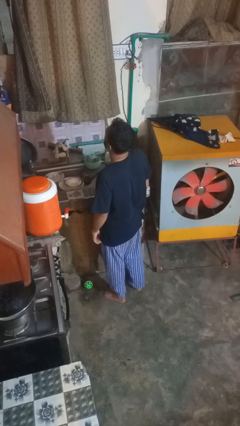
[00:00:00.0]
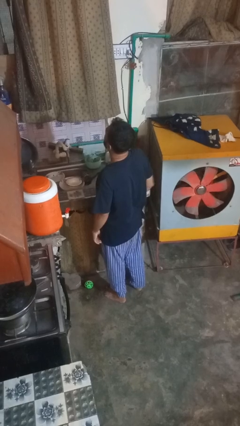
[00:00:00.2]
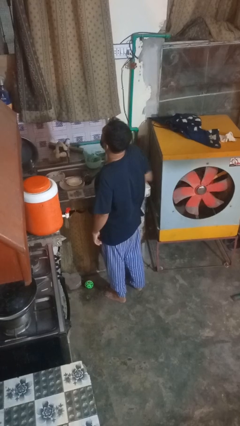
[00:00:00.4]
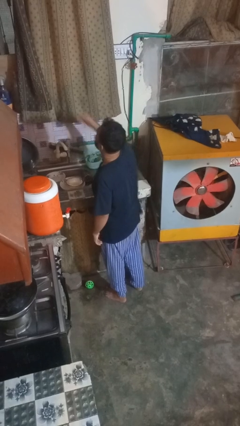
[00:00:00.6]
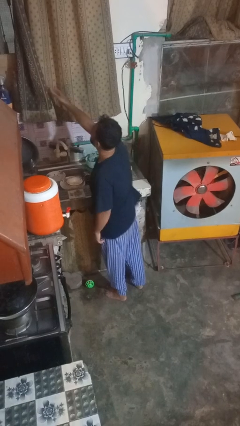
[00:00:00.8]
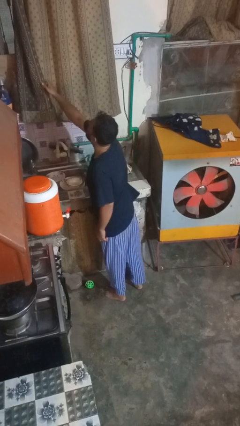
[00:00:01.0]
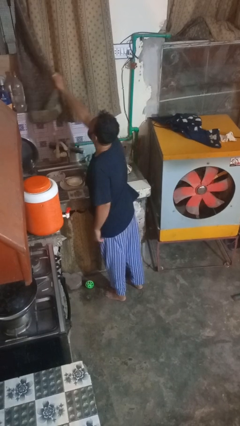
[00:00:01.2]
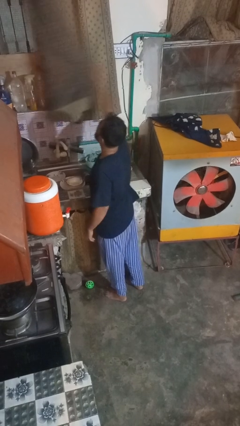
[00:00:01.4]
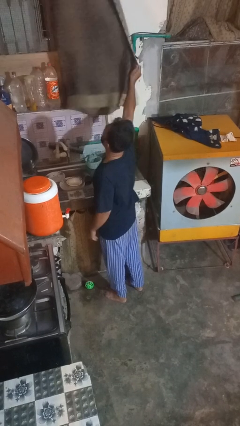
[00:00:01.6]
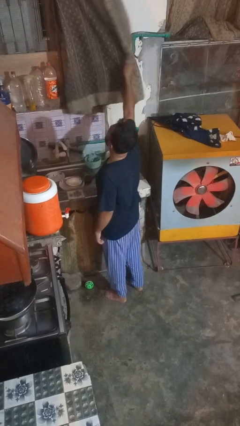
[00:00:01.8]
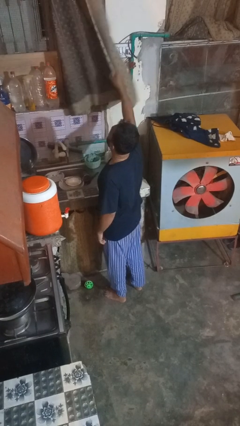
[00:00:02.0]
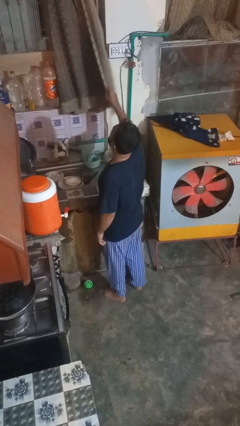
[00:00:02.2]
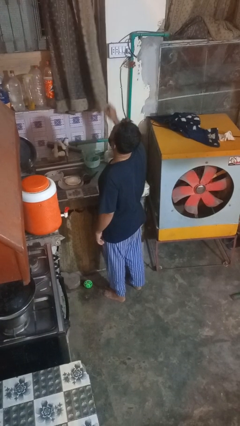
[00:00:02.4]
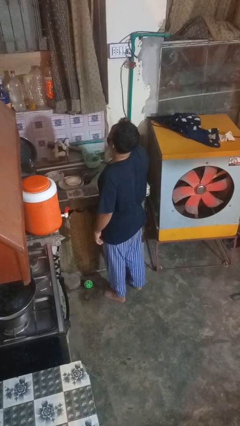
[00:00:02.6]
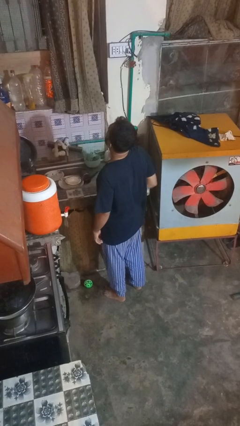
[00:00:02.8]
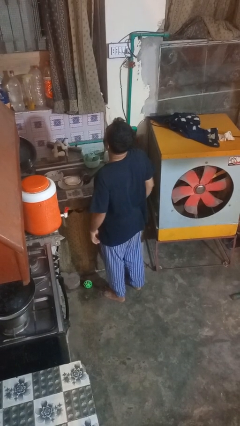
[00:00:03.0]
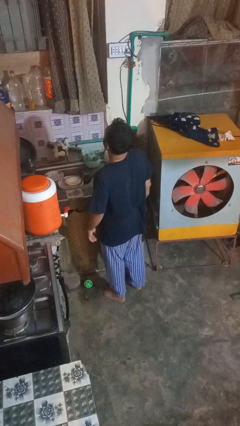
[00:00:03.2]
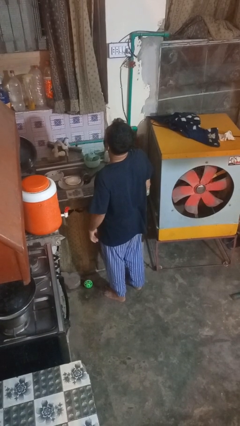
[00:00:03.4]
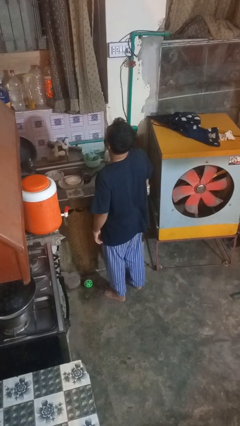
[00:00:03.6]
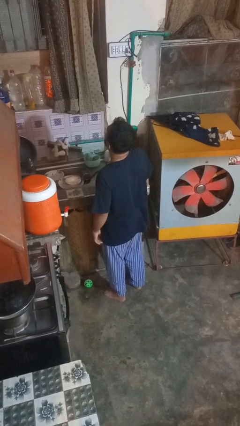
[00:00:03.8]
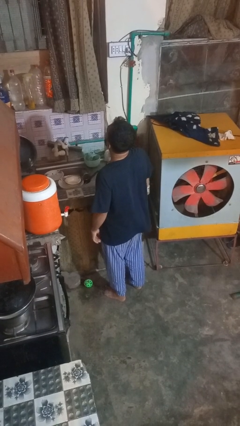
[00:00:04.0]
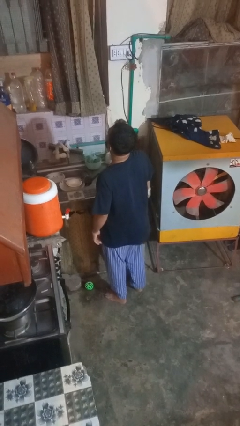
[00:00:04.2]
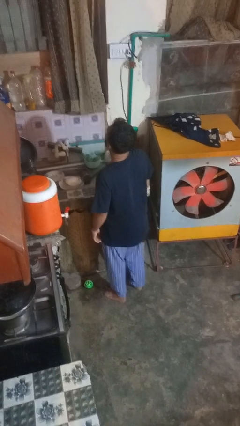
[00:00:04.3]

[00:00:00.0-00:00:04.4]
person opens curtains

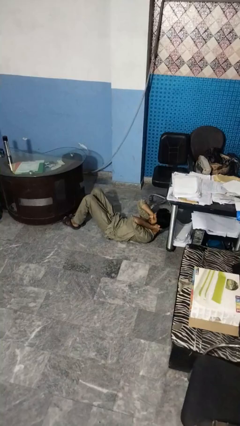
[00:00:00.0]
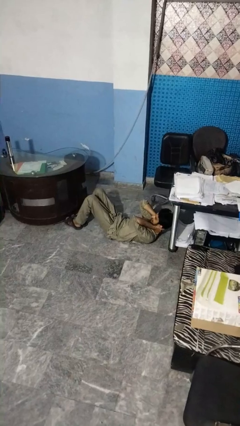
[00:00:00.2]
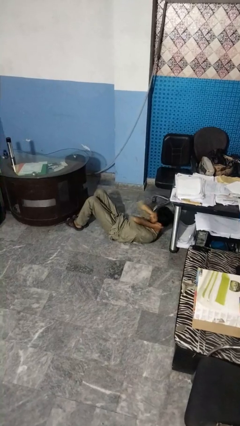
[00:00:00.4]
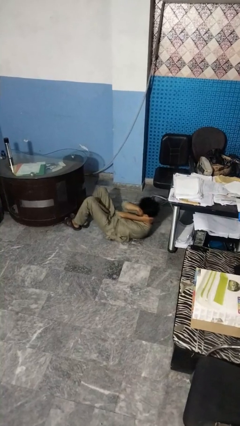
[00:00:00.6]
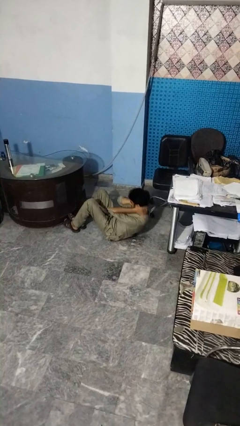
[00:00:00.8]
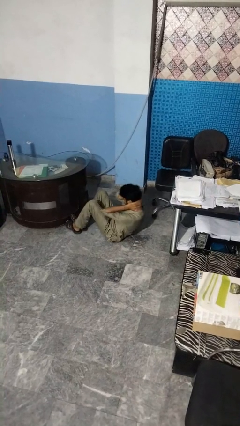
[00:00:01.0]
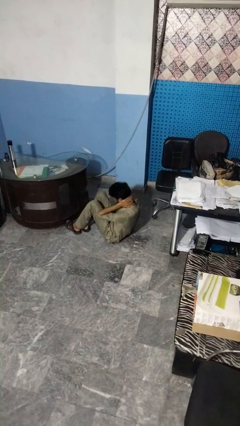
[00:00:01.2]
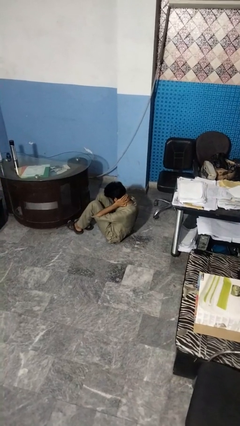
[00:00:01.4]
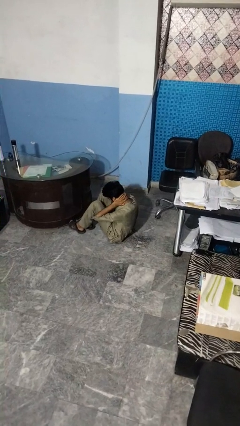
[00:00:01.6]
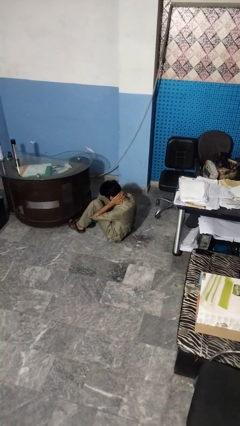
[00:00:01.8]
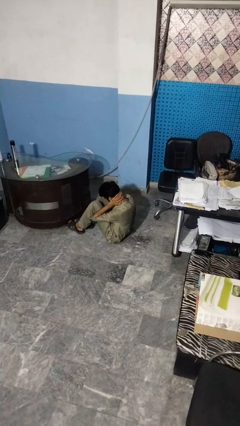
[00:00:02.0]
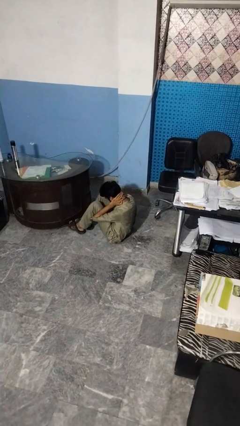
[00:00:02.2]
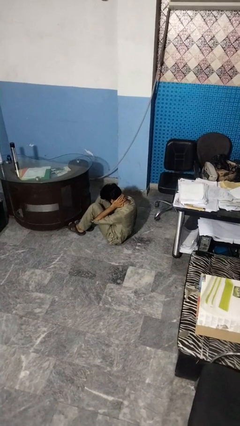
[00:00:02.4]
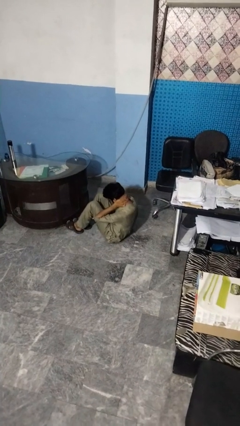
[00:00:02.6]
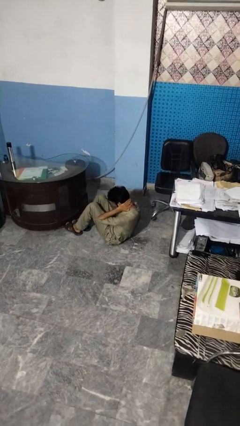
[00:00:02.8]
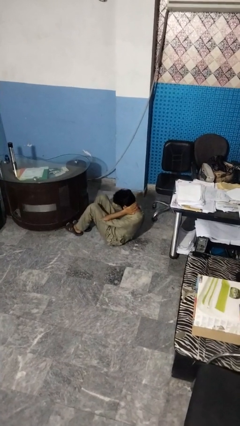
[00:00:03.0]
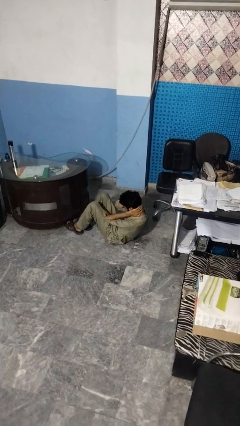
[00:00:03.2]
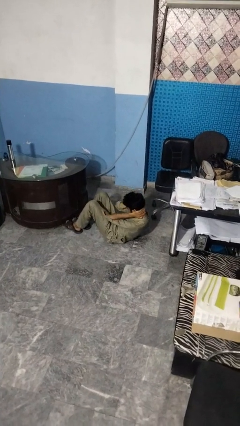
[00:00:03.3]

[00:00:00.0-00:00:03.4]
person exercises with situp

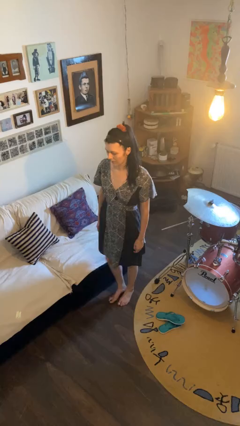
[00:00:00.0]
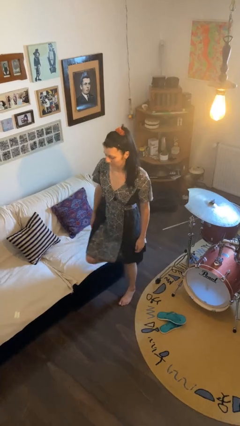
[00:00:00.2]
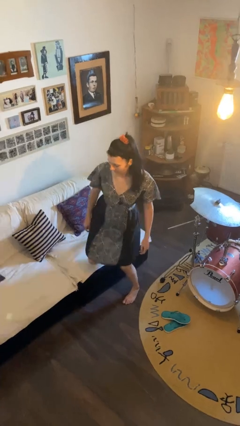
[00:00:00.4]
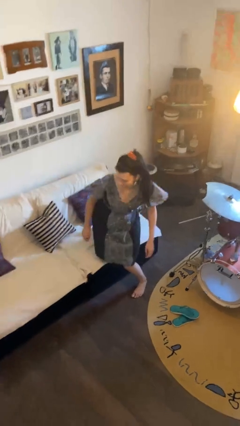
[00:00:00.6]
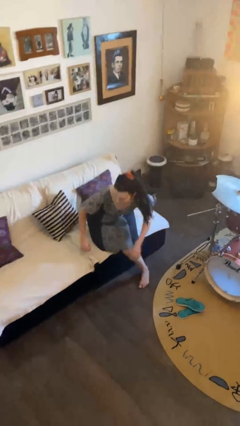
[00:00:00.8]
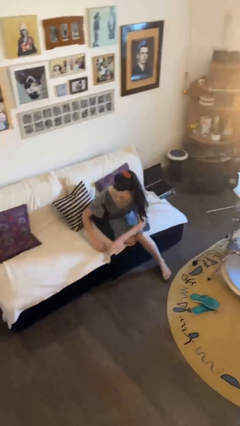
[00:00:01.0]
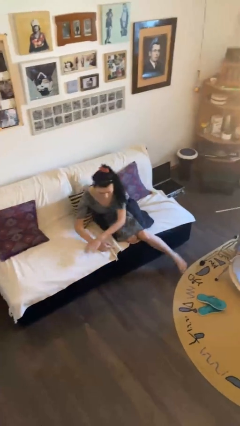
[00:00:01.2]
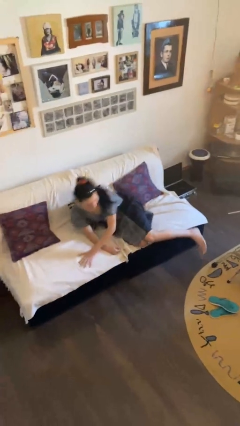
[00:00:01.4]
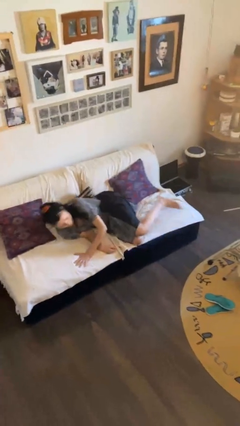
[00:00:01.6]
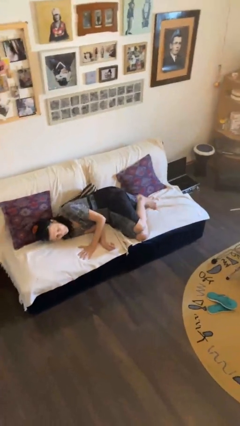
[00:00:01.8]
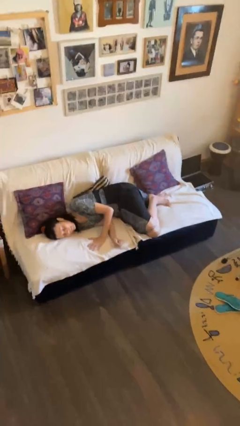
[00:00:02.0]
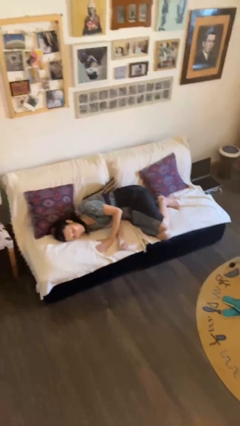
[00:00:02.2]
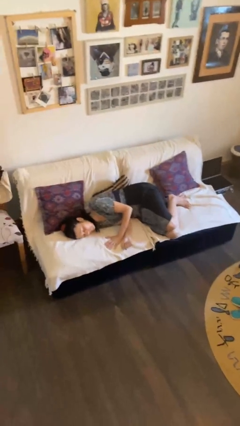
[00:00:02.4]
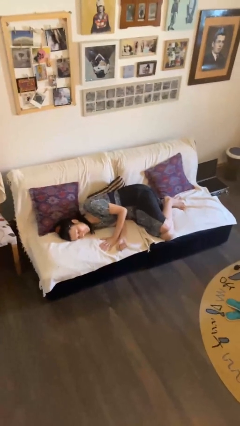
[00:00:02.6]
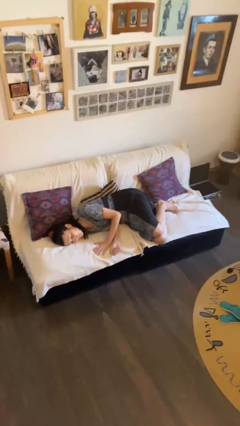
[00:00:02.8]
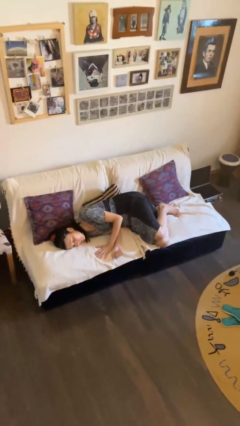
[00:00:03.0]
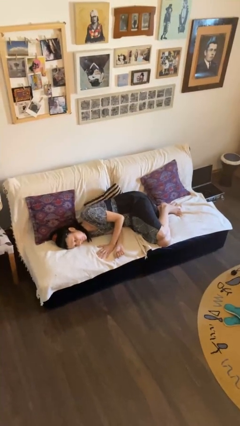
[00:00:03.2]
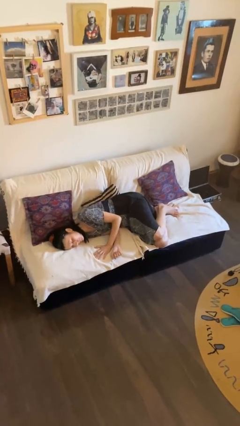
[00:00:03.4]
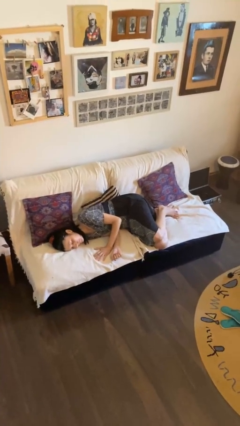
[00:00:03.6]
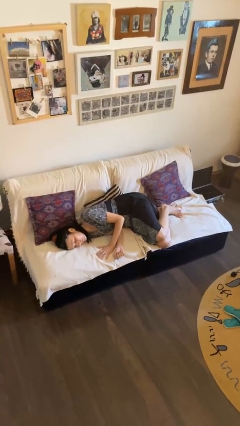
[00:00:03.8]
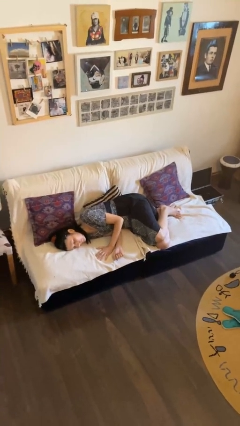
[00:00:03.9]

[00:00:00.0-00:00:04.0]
person lies down on couch

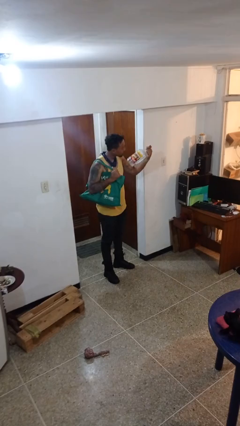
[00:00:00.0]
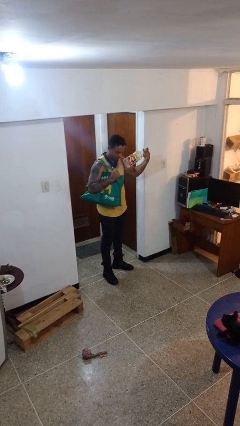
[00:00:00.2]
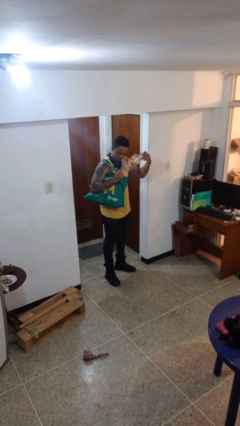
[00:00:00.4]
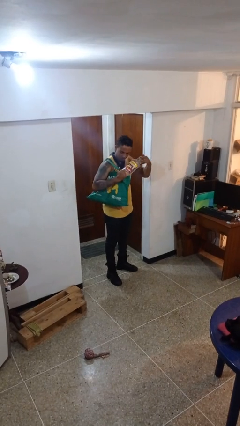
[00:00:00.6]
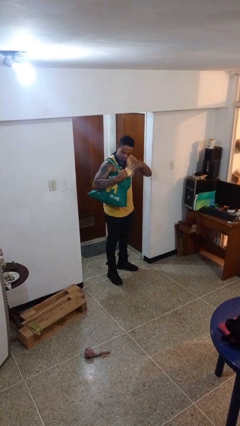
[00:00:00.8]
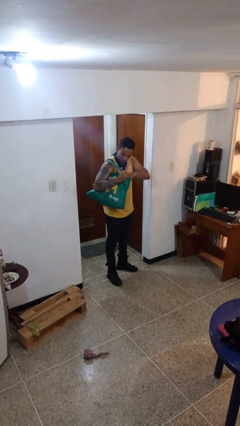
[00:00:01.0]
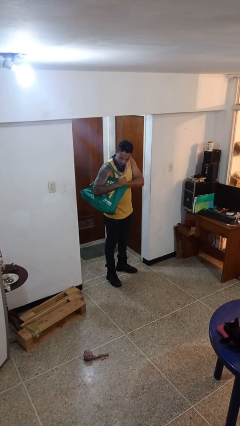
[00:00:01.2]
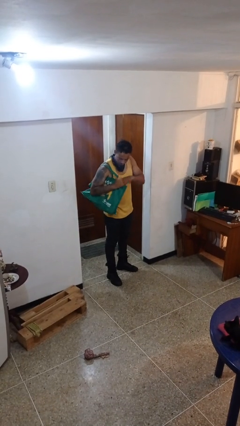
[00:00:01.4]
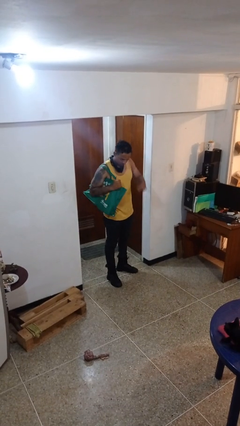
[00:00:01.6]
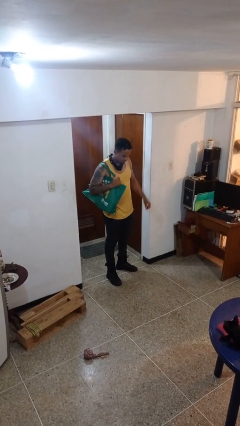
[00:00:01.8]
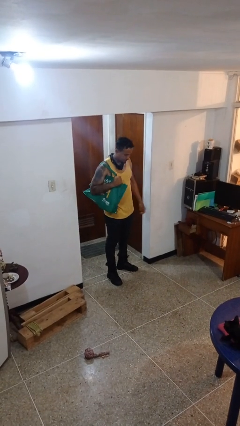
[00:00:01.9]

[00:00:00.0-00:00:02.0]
person puts object into purse

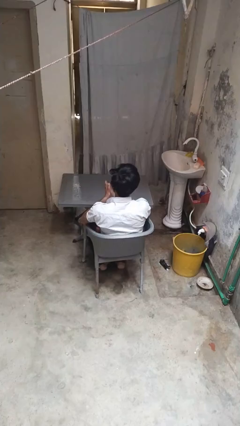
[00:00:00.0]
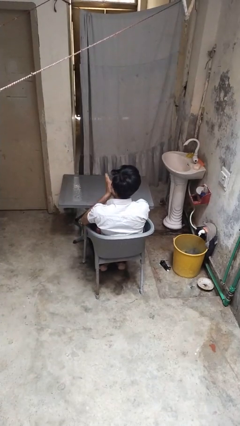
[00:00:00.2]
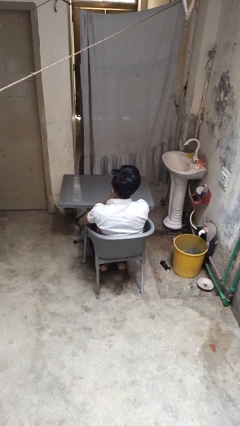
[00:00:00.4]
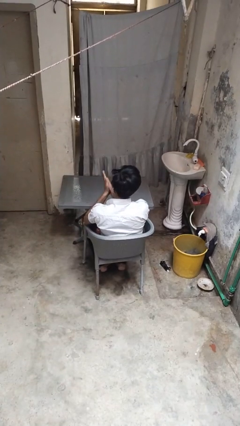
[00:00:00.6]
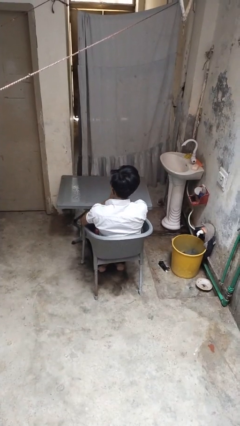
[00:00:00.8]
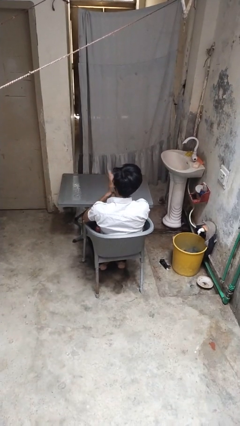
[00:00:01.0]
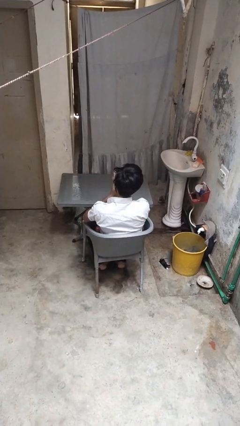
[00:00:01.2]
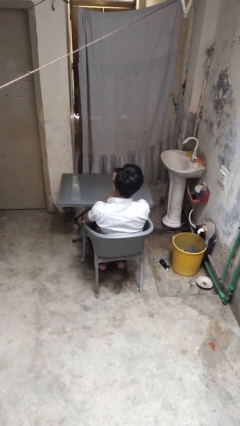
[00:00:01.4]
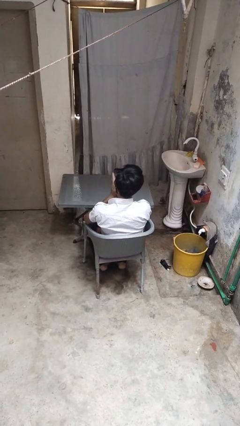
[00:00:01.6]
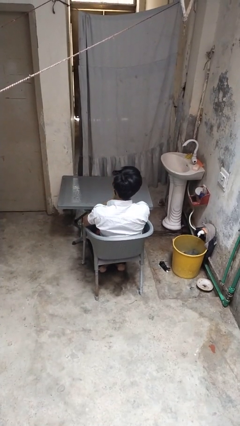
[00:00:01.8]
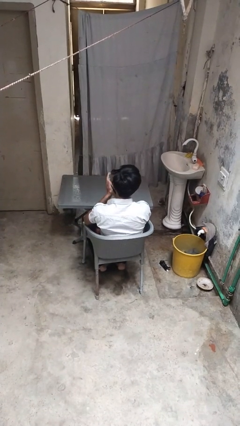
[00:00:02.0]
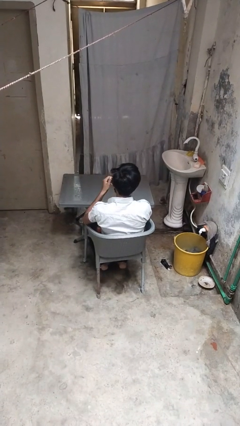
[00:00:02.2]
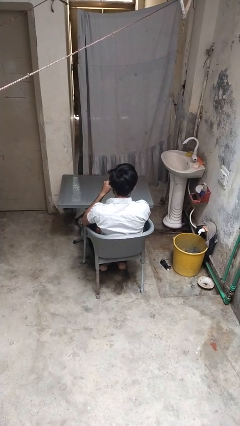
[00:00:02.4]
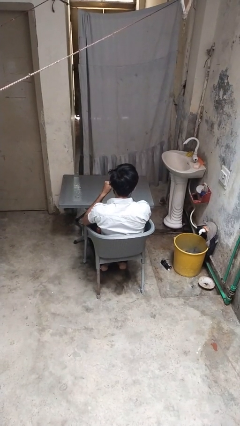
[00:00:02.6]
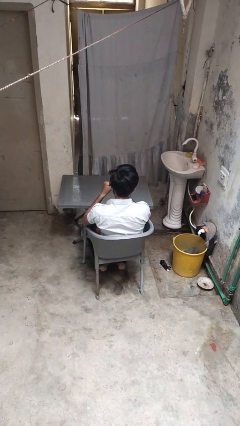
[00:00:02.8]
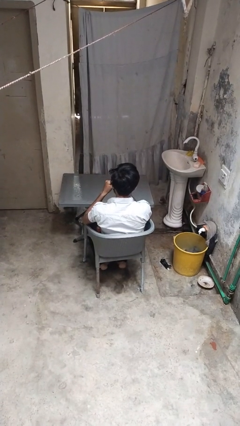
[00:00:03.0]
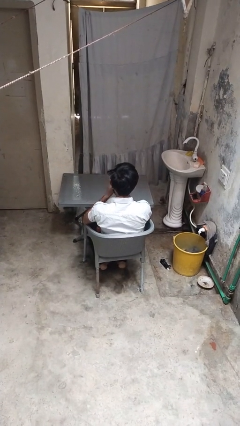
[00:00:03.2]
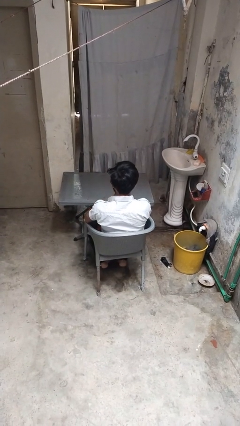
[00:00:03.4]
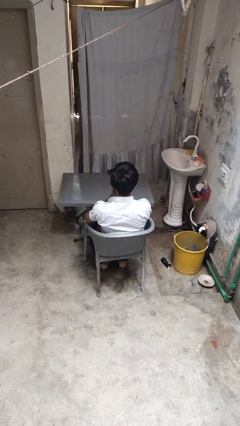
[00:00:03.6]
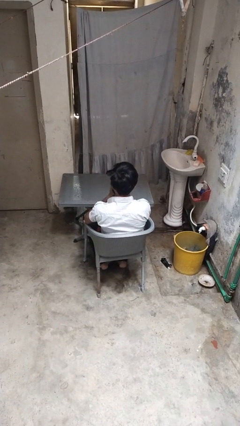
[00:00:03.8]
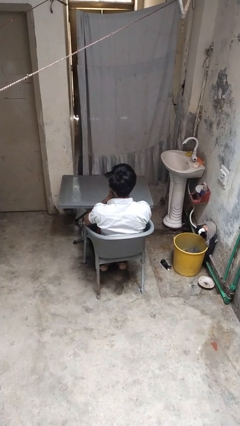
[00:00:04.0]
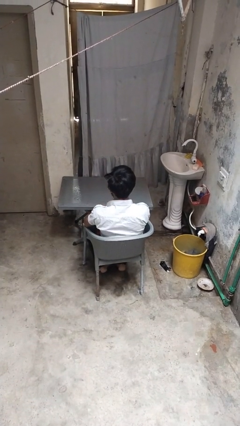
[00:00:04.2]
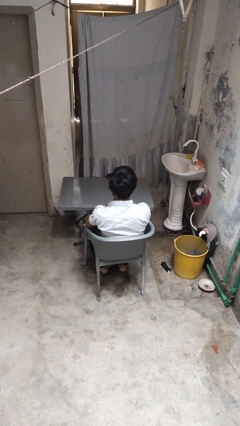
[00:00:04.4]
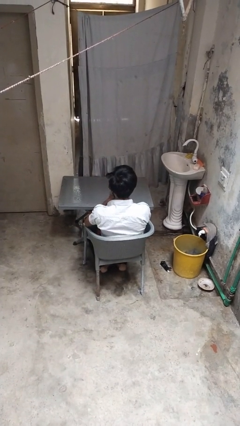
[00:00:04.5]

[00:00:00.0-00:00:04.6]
person blows into hands
